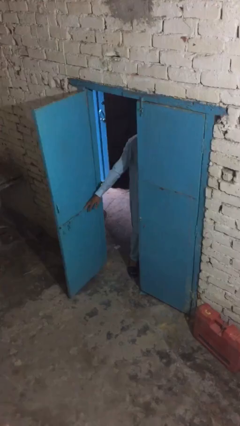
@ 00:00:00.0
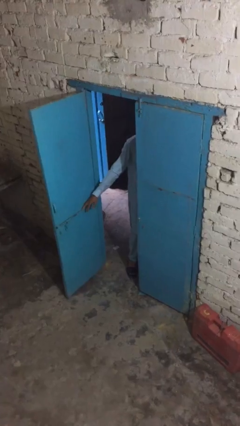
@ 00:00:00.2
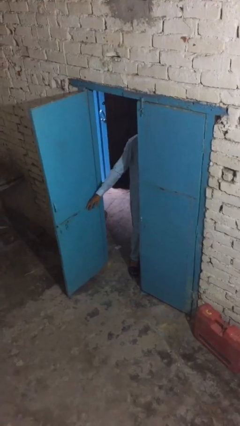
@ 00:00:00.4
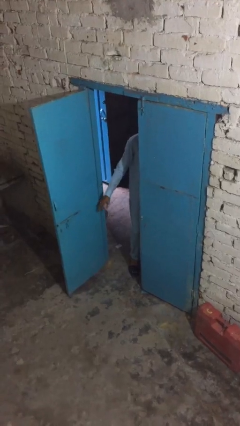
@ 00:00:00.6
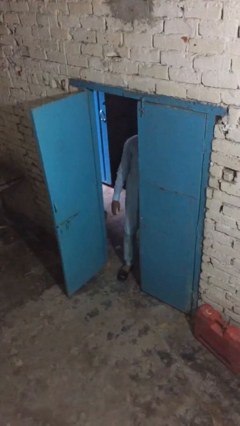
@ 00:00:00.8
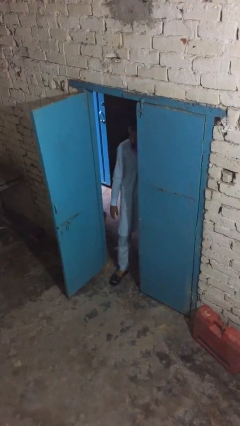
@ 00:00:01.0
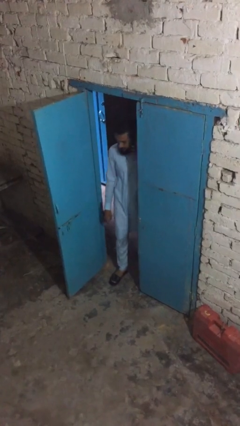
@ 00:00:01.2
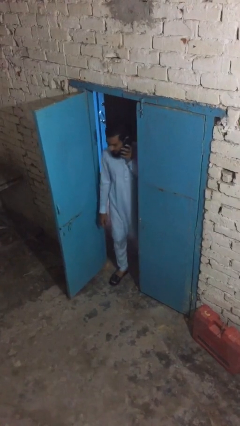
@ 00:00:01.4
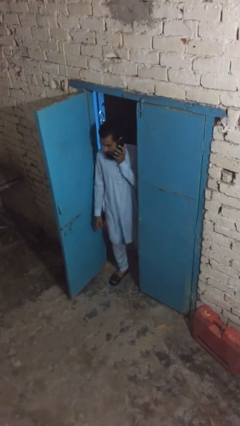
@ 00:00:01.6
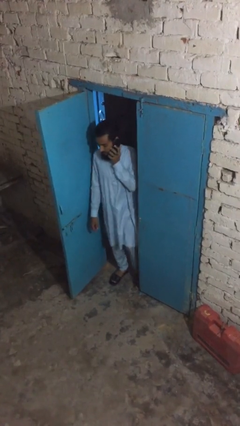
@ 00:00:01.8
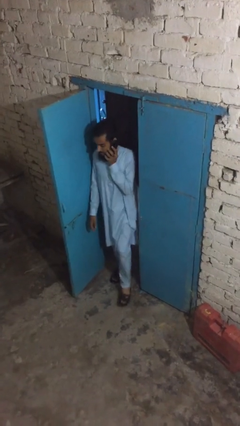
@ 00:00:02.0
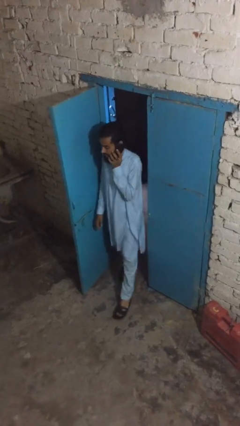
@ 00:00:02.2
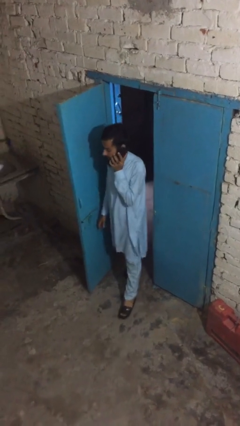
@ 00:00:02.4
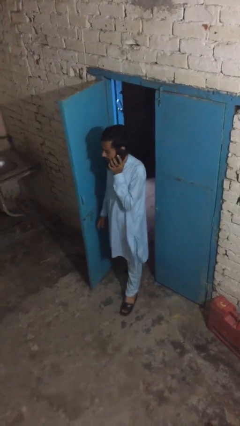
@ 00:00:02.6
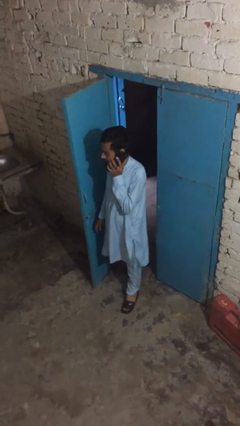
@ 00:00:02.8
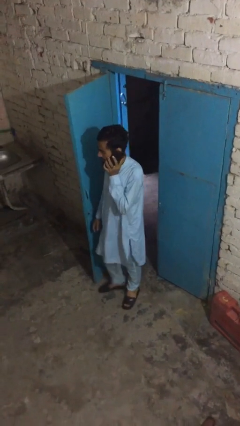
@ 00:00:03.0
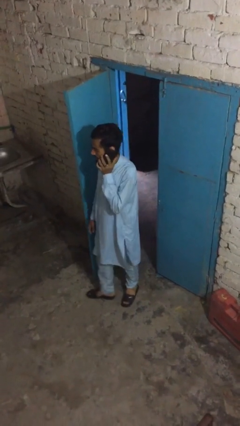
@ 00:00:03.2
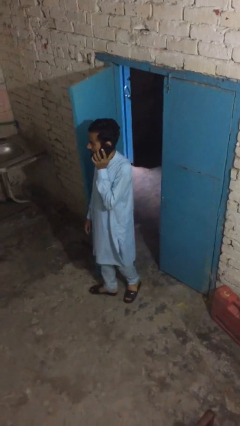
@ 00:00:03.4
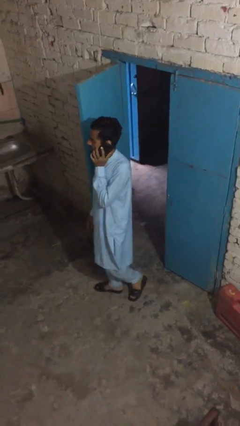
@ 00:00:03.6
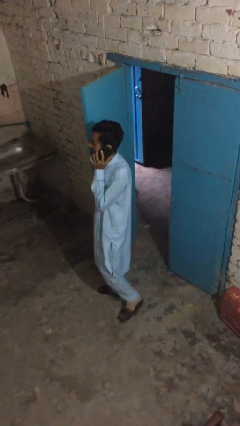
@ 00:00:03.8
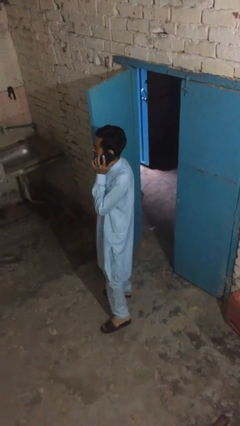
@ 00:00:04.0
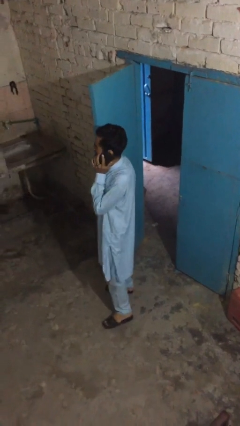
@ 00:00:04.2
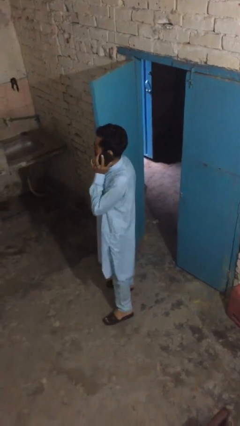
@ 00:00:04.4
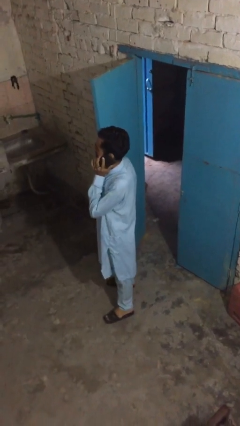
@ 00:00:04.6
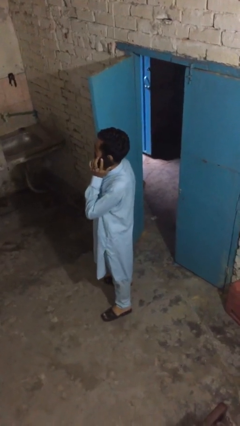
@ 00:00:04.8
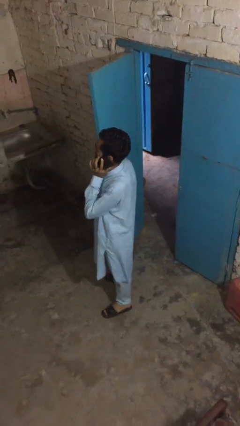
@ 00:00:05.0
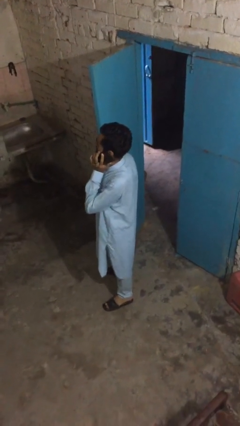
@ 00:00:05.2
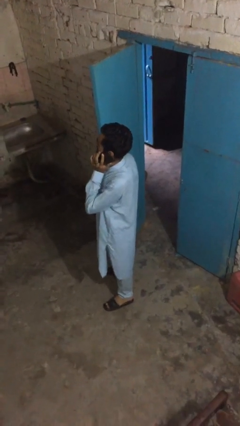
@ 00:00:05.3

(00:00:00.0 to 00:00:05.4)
person enters scene through structure

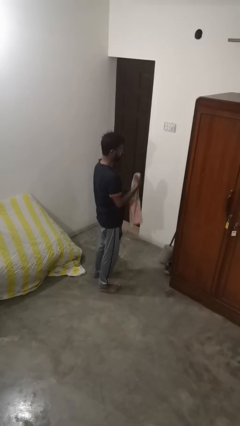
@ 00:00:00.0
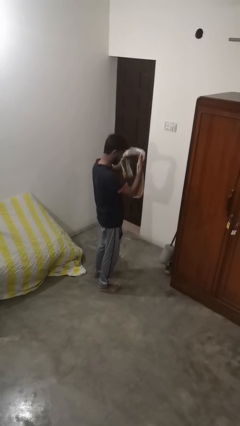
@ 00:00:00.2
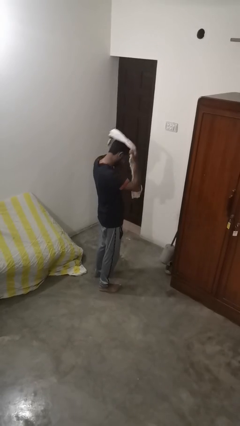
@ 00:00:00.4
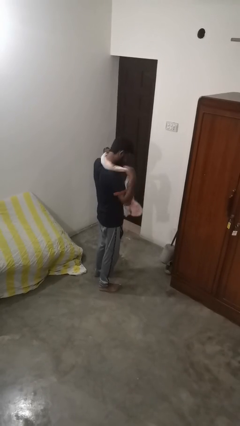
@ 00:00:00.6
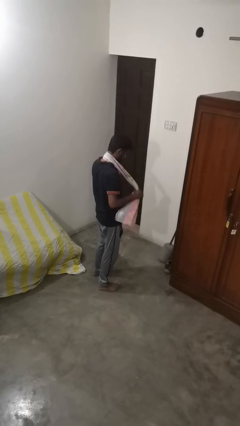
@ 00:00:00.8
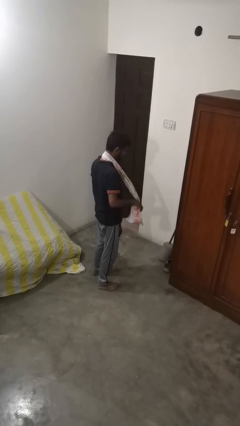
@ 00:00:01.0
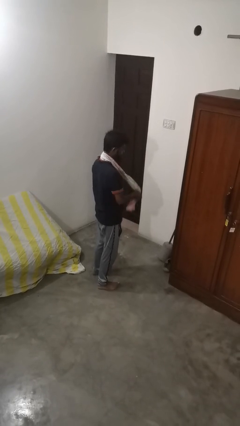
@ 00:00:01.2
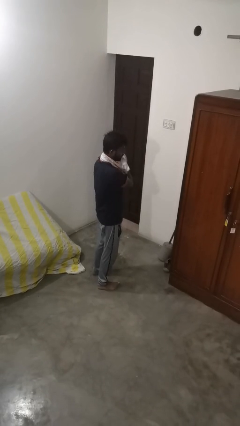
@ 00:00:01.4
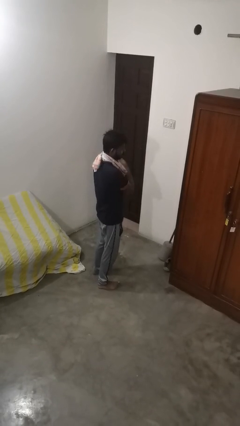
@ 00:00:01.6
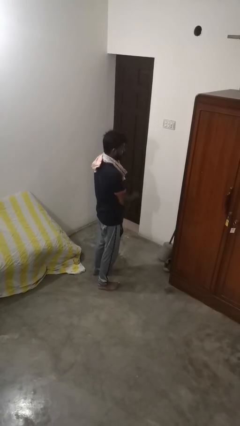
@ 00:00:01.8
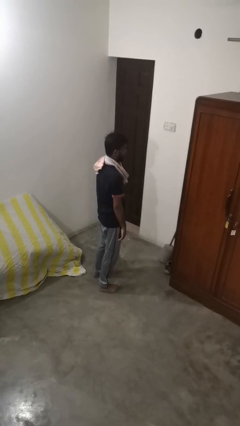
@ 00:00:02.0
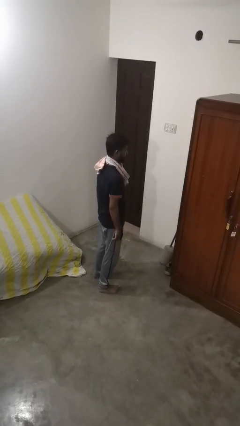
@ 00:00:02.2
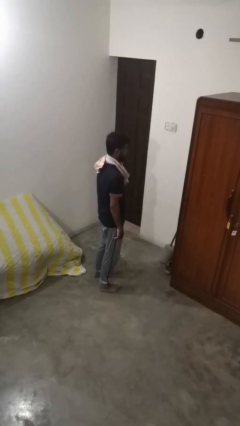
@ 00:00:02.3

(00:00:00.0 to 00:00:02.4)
person puts on scarf

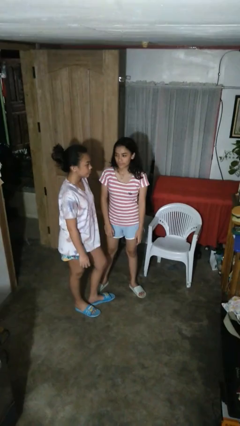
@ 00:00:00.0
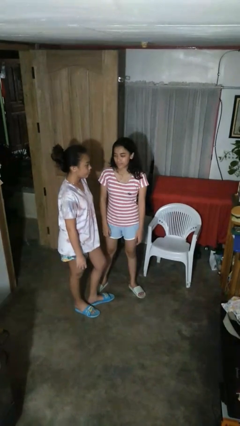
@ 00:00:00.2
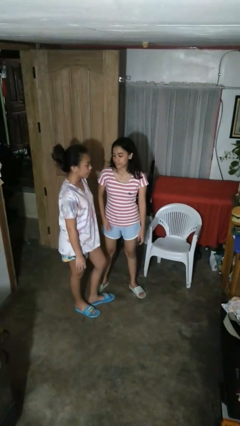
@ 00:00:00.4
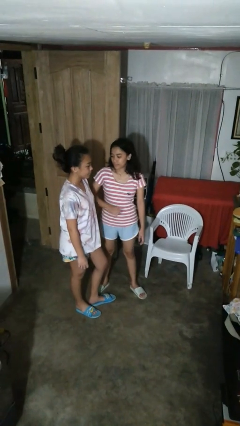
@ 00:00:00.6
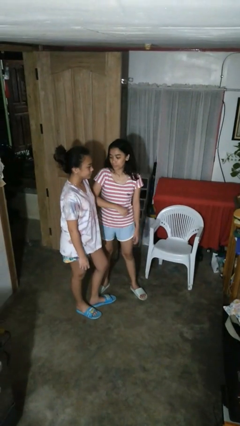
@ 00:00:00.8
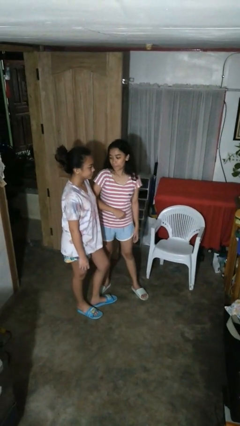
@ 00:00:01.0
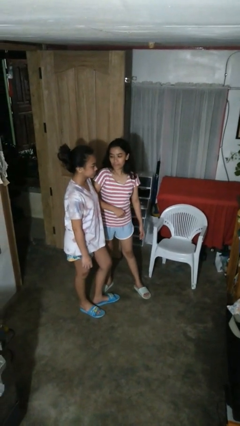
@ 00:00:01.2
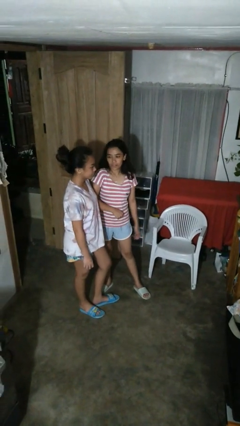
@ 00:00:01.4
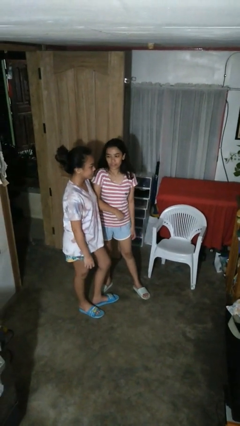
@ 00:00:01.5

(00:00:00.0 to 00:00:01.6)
person nudges person with elbow

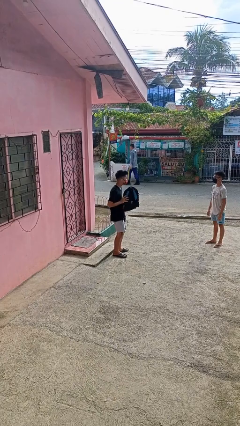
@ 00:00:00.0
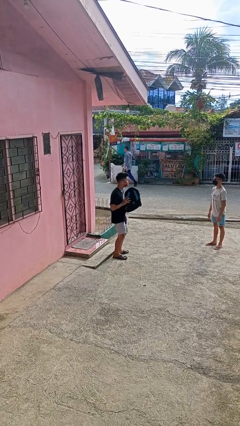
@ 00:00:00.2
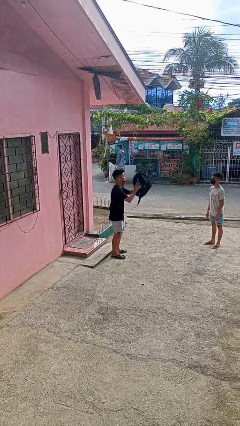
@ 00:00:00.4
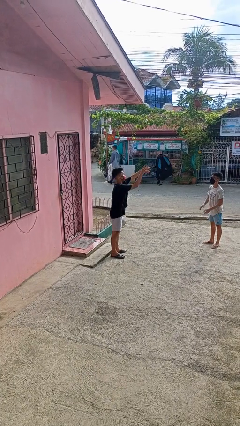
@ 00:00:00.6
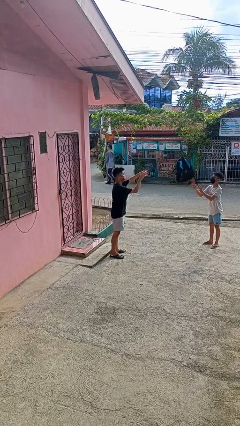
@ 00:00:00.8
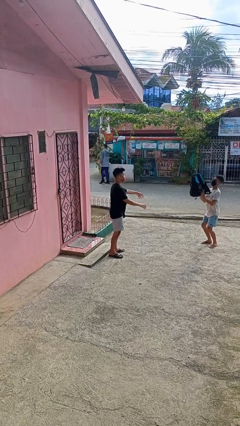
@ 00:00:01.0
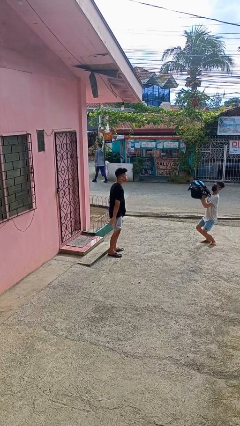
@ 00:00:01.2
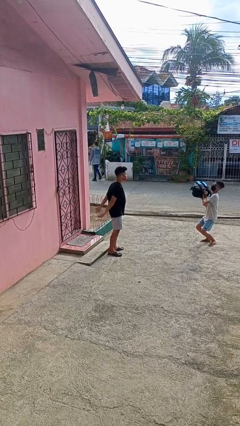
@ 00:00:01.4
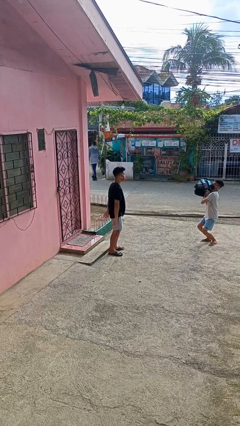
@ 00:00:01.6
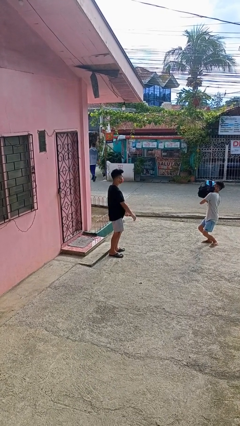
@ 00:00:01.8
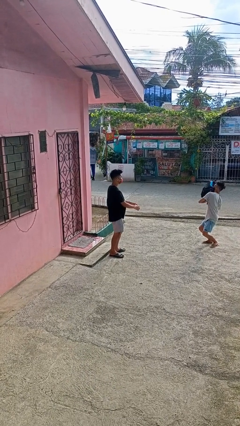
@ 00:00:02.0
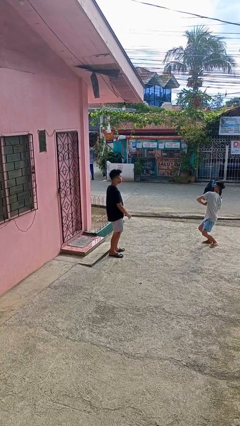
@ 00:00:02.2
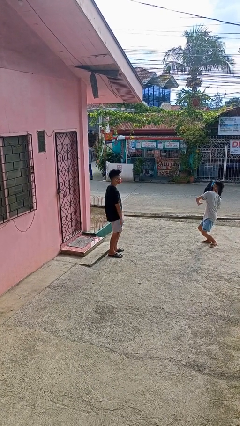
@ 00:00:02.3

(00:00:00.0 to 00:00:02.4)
person throws object to person

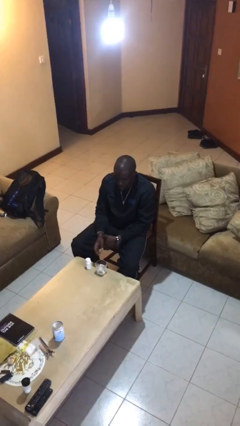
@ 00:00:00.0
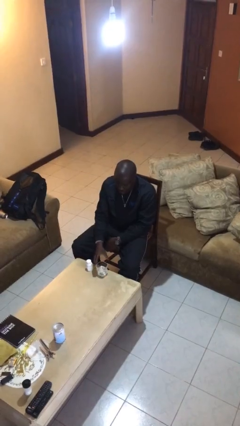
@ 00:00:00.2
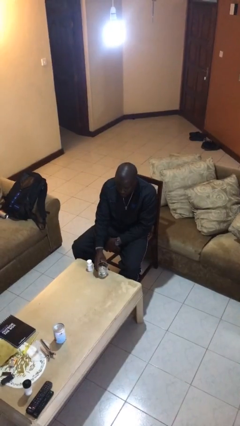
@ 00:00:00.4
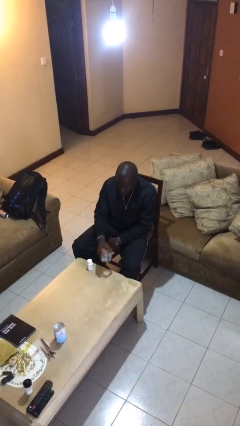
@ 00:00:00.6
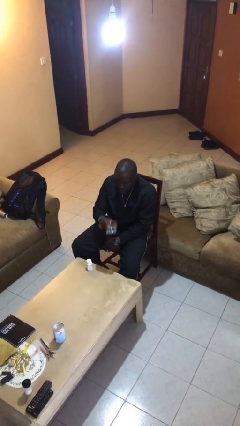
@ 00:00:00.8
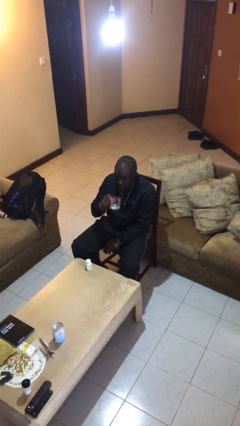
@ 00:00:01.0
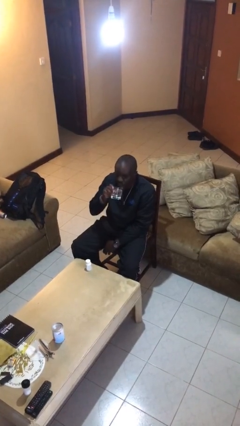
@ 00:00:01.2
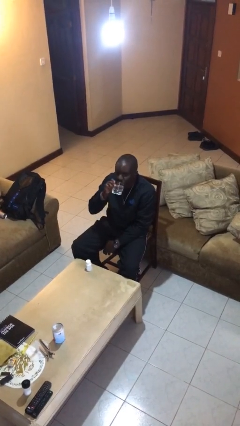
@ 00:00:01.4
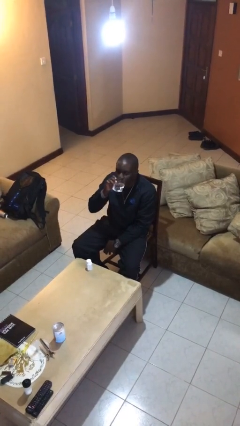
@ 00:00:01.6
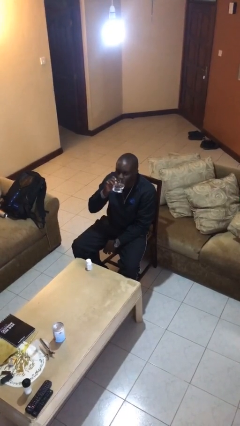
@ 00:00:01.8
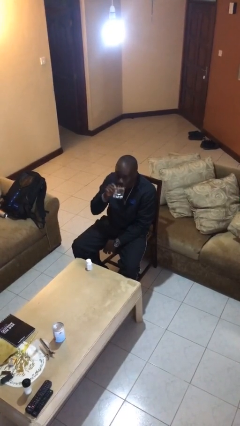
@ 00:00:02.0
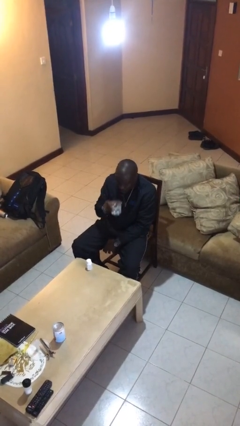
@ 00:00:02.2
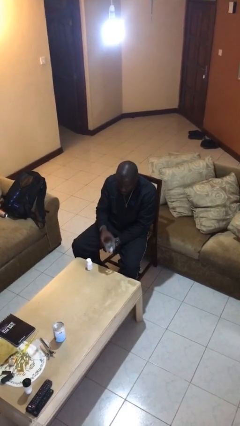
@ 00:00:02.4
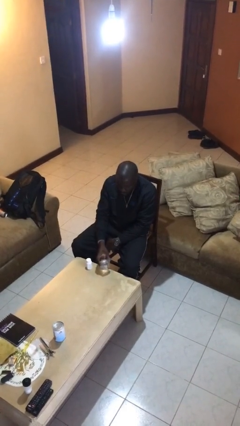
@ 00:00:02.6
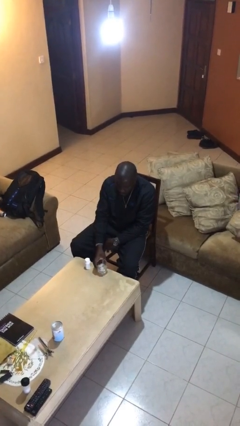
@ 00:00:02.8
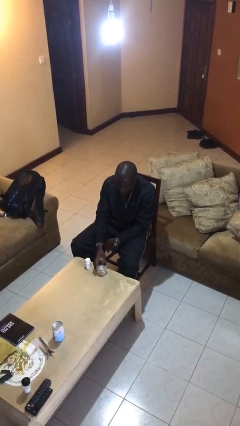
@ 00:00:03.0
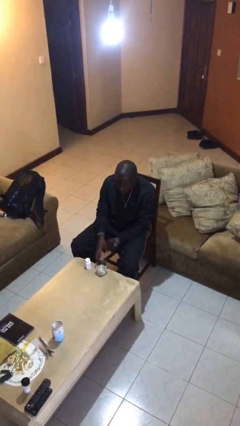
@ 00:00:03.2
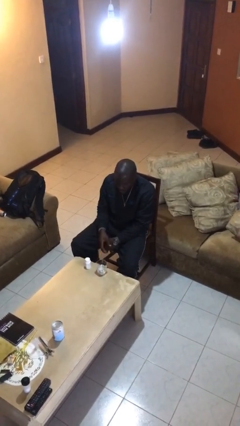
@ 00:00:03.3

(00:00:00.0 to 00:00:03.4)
person drinks from cup

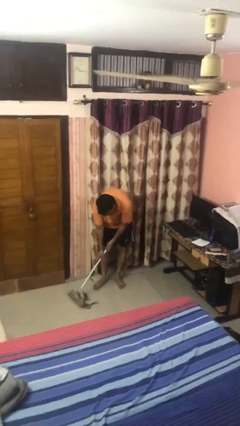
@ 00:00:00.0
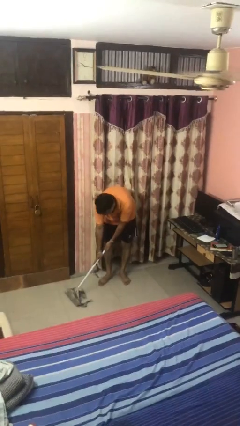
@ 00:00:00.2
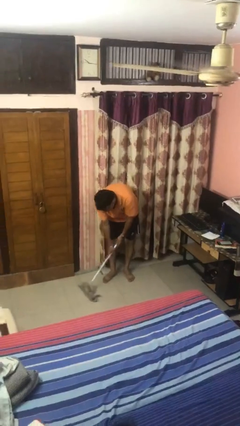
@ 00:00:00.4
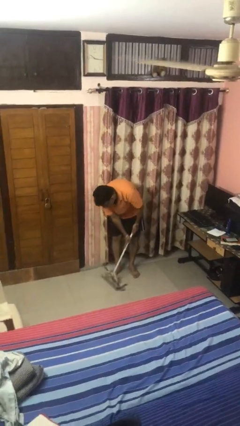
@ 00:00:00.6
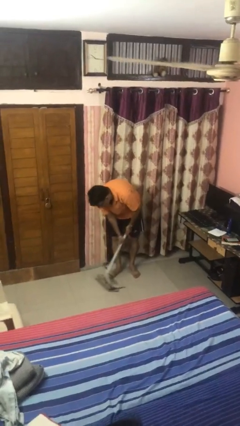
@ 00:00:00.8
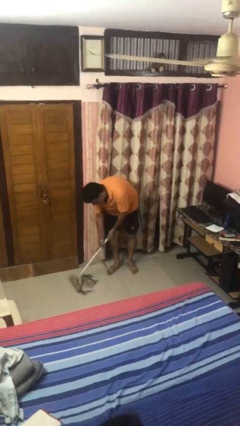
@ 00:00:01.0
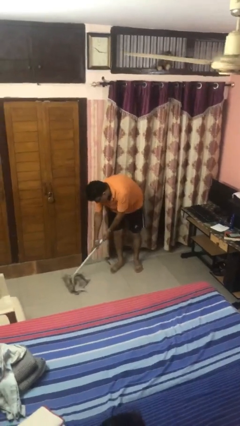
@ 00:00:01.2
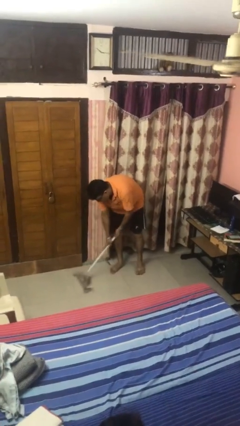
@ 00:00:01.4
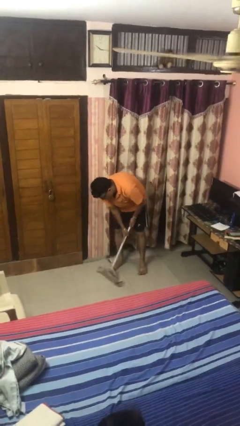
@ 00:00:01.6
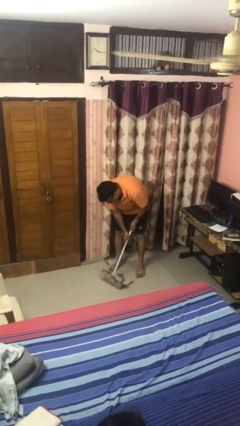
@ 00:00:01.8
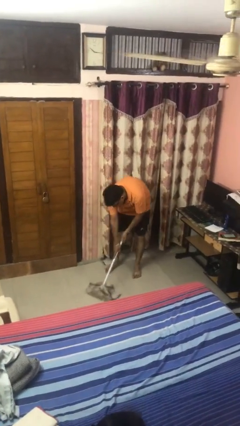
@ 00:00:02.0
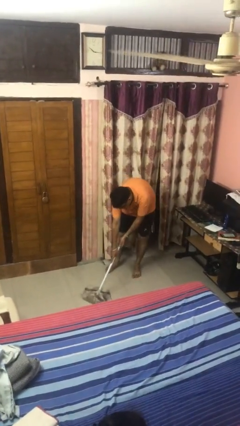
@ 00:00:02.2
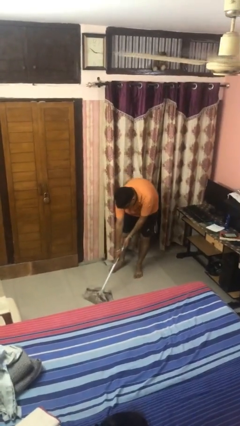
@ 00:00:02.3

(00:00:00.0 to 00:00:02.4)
person mops
